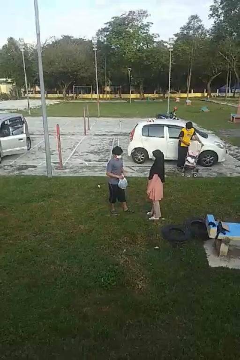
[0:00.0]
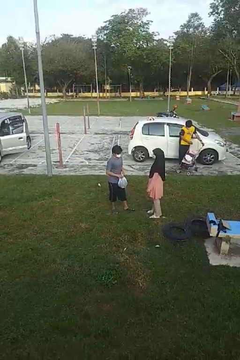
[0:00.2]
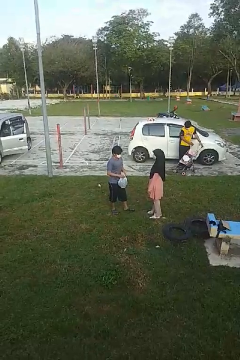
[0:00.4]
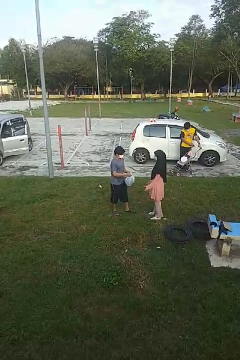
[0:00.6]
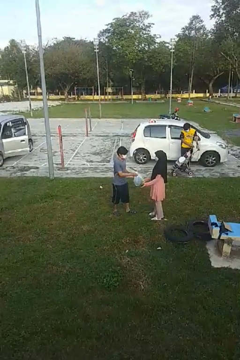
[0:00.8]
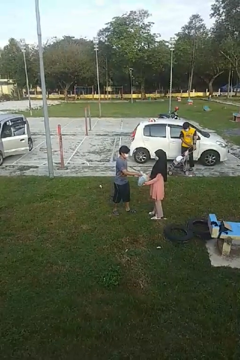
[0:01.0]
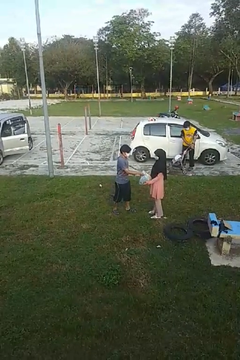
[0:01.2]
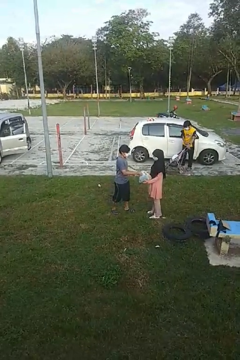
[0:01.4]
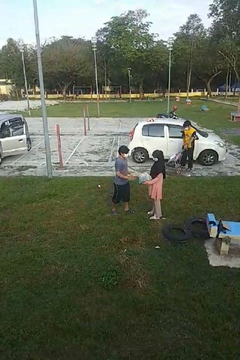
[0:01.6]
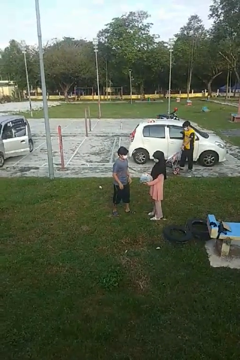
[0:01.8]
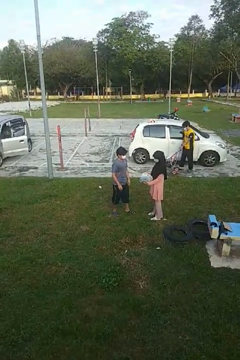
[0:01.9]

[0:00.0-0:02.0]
person transfers object to person

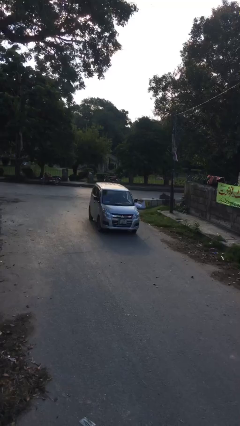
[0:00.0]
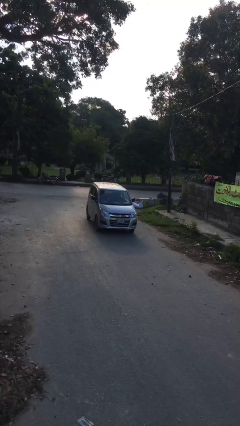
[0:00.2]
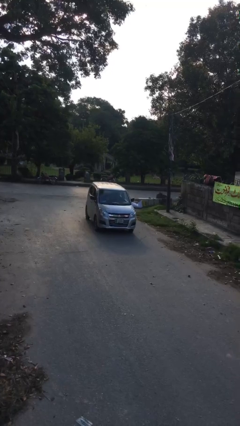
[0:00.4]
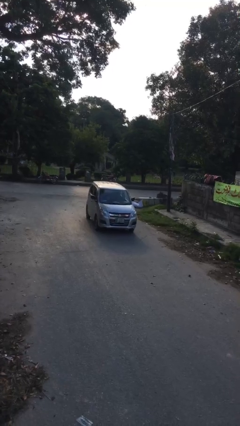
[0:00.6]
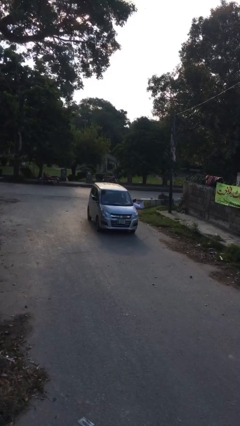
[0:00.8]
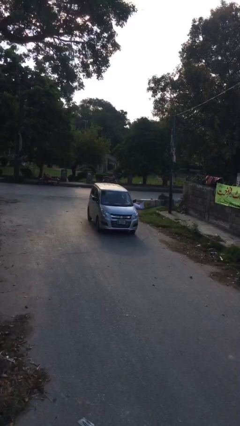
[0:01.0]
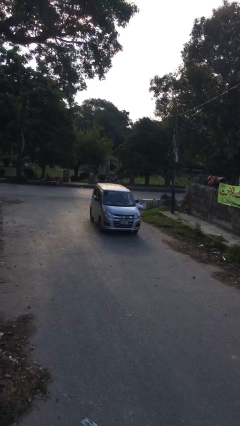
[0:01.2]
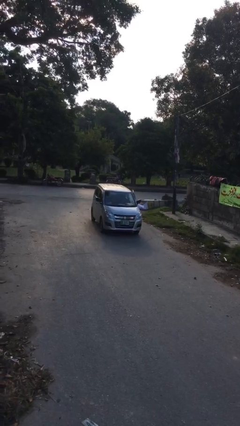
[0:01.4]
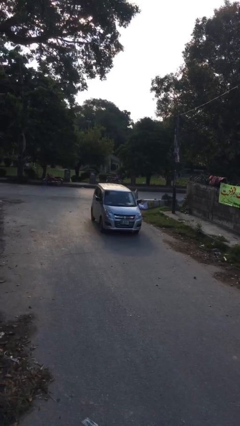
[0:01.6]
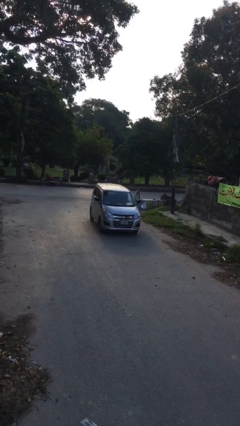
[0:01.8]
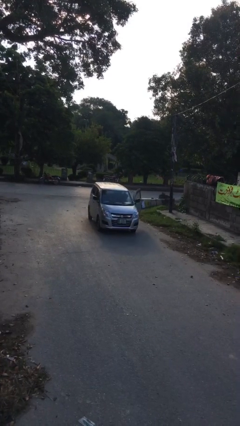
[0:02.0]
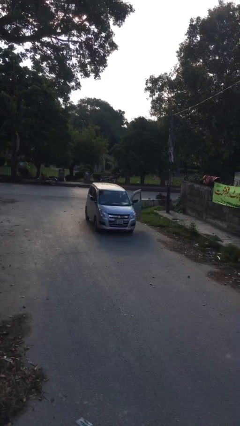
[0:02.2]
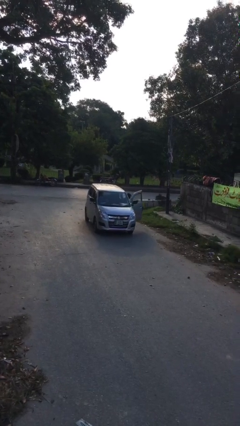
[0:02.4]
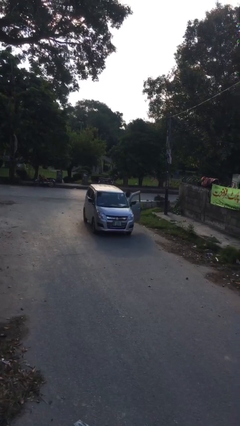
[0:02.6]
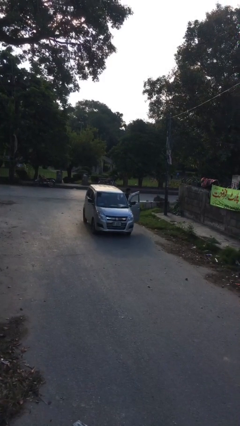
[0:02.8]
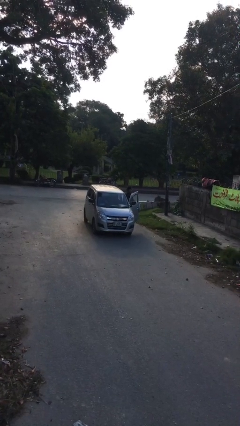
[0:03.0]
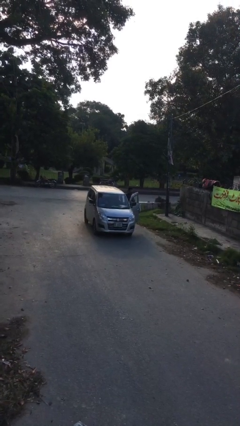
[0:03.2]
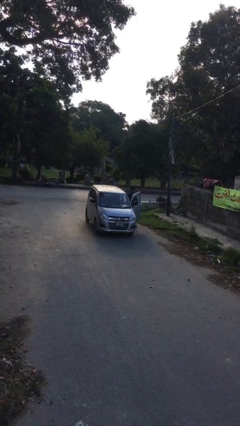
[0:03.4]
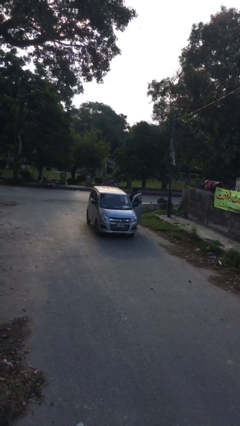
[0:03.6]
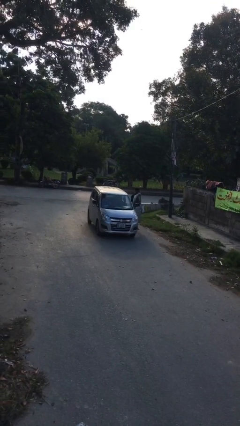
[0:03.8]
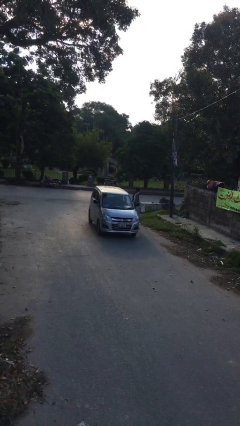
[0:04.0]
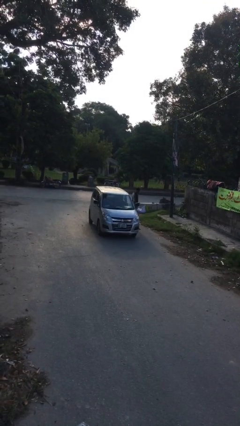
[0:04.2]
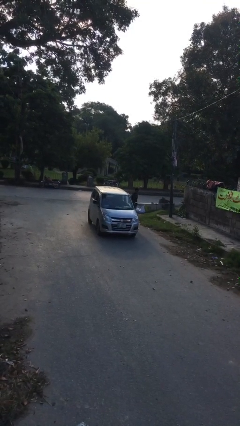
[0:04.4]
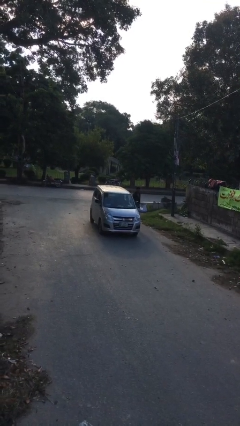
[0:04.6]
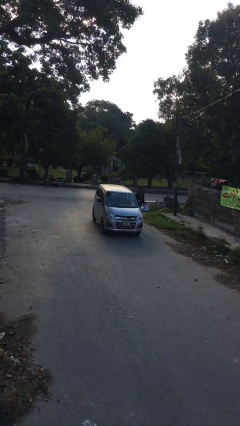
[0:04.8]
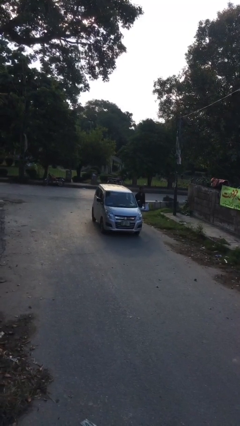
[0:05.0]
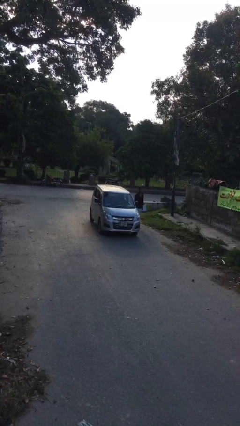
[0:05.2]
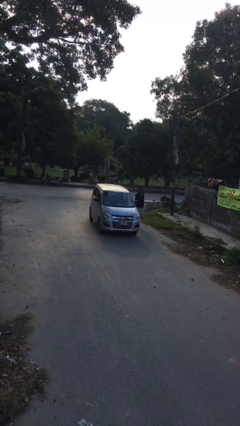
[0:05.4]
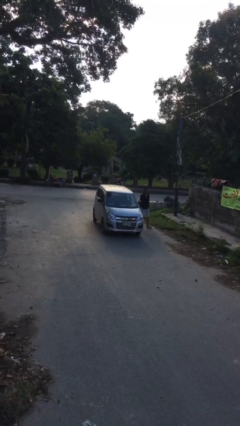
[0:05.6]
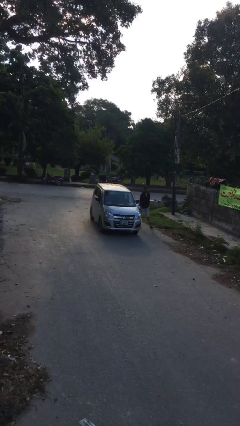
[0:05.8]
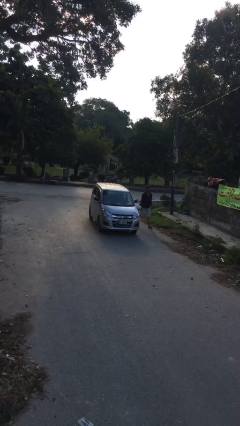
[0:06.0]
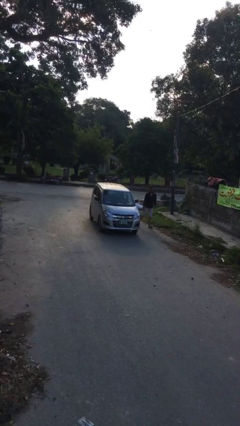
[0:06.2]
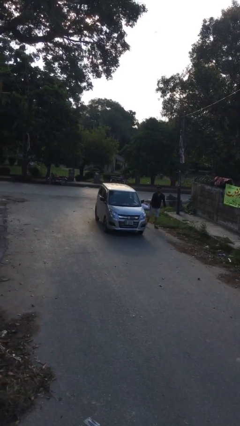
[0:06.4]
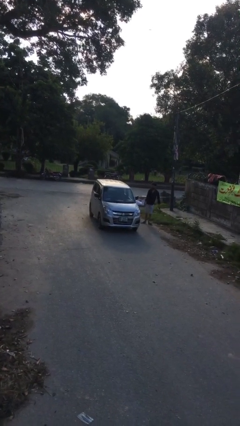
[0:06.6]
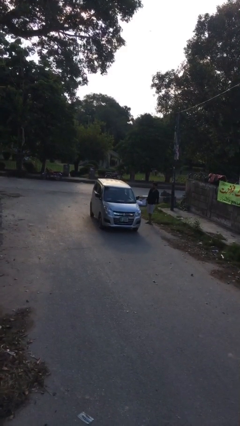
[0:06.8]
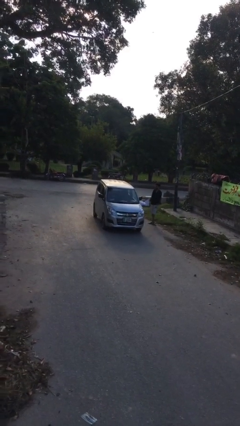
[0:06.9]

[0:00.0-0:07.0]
car drops off person

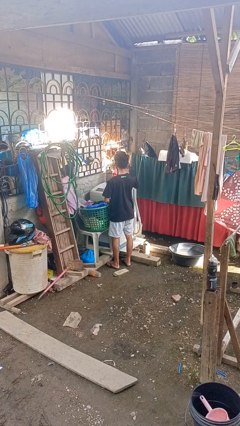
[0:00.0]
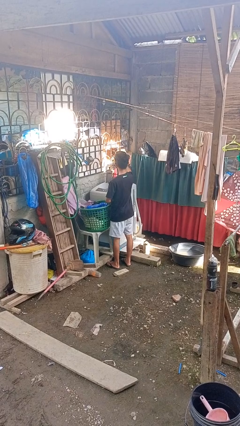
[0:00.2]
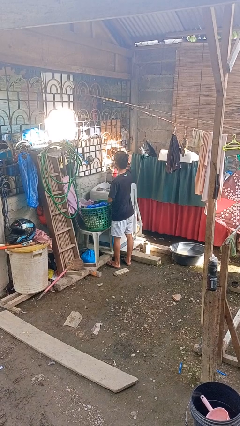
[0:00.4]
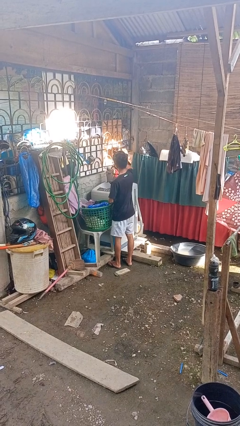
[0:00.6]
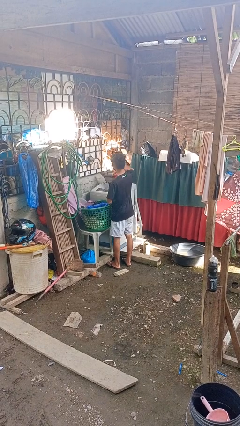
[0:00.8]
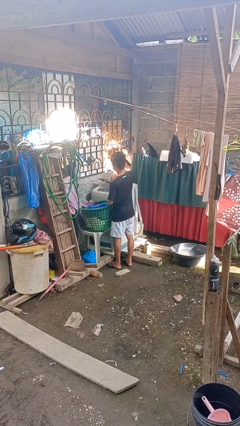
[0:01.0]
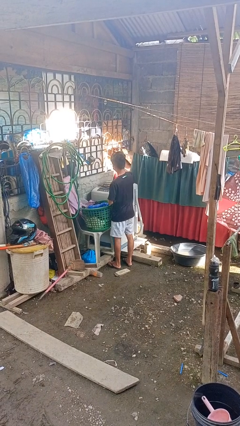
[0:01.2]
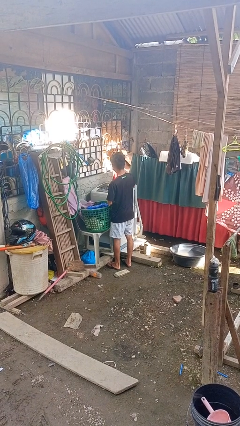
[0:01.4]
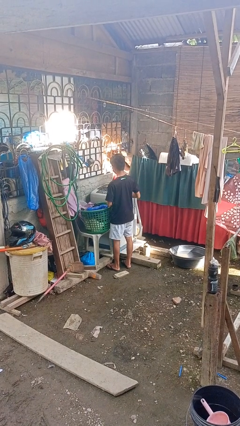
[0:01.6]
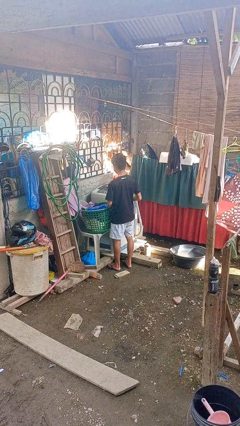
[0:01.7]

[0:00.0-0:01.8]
person closes clothes washer

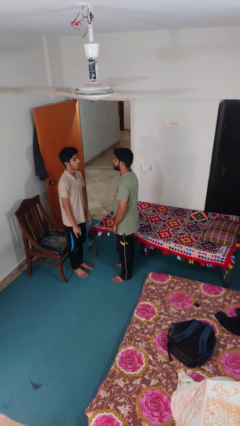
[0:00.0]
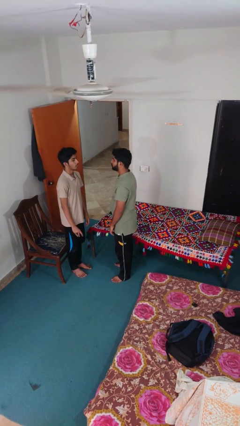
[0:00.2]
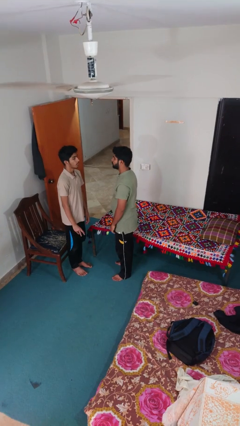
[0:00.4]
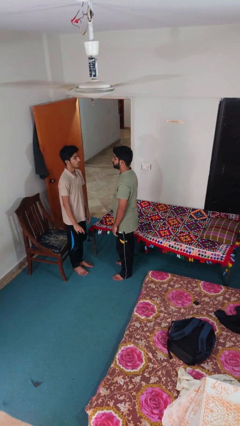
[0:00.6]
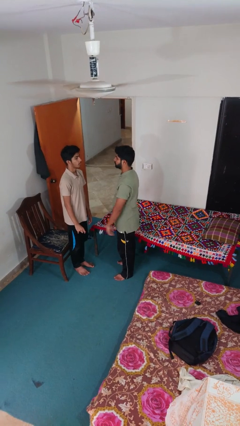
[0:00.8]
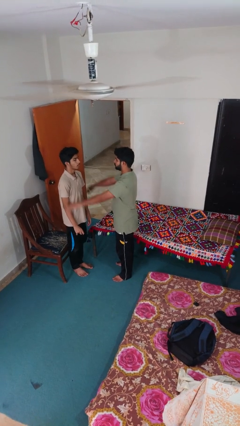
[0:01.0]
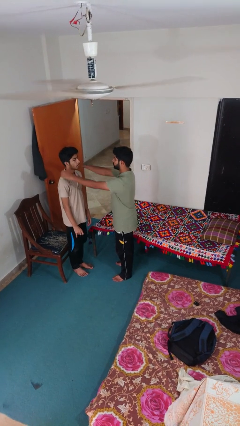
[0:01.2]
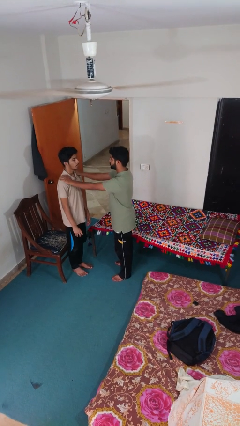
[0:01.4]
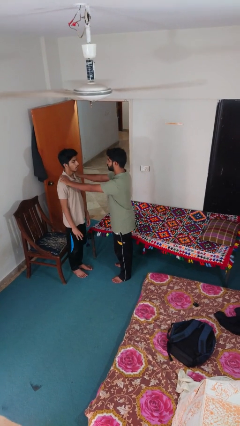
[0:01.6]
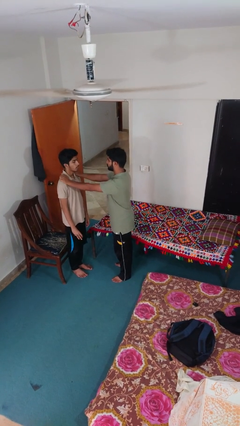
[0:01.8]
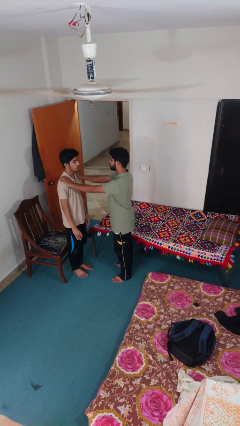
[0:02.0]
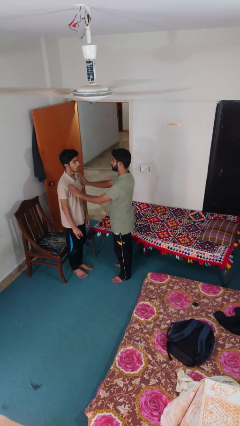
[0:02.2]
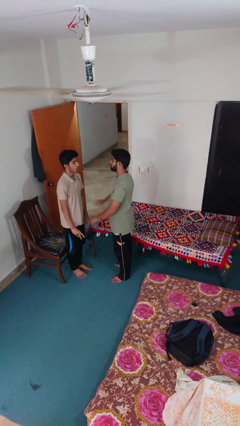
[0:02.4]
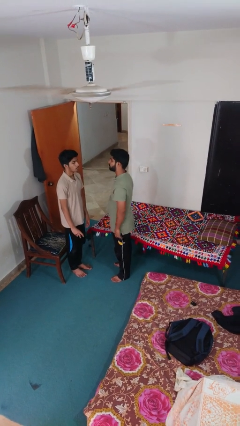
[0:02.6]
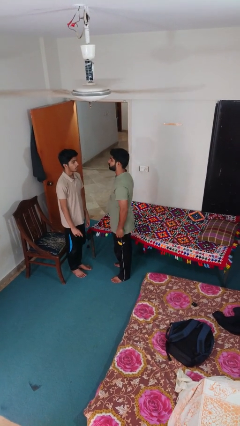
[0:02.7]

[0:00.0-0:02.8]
person pounds shoulders of person

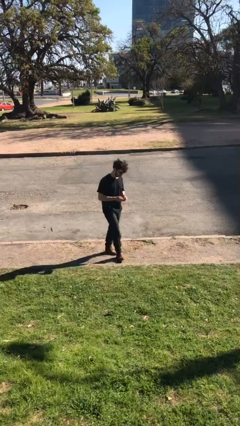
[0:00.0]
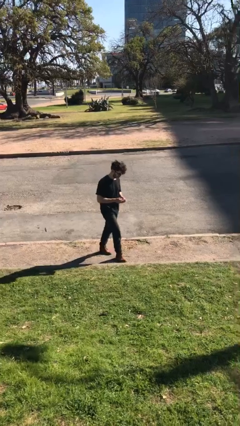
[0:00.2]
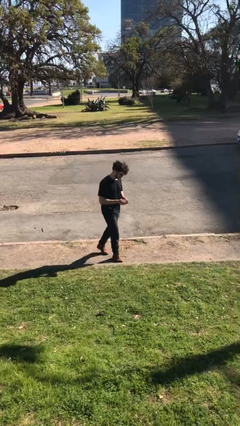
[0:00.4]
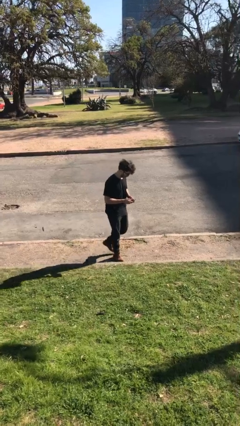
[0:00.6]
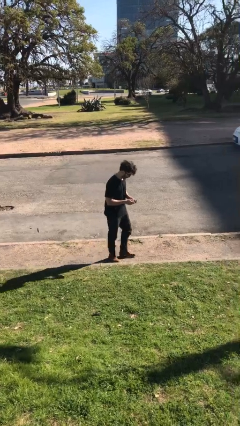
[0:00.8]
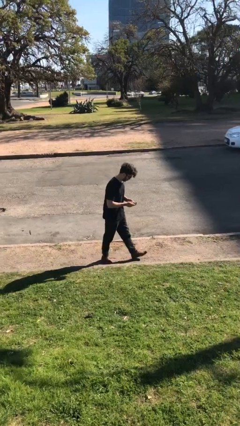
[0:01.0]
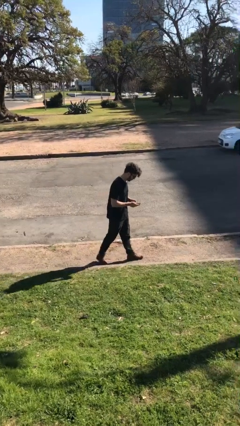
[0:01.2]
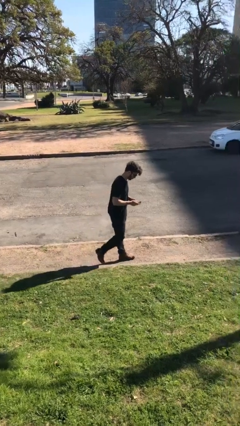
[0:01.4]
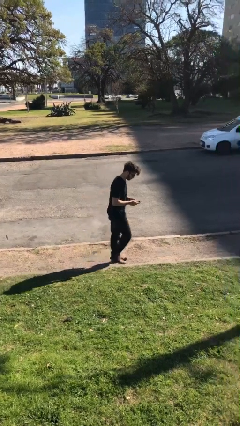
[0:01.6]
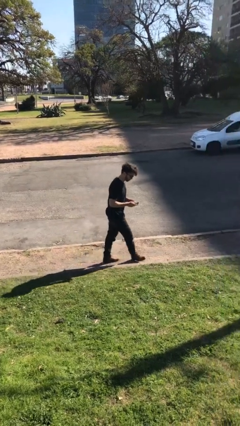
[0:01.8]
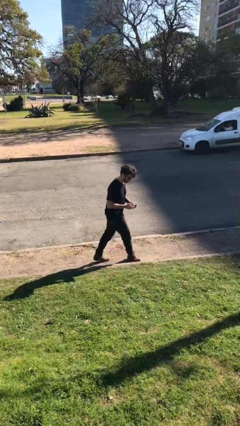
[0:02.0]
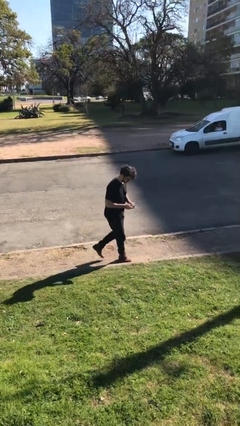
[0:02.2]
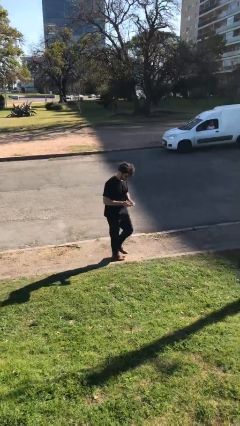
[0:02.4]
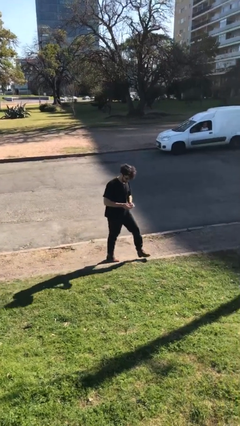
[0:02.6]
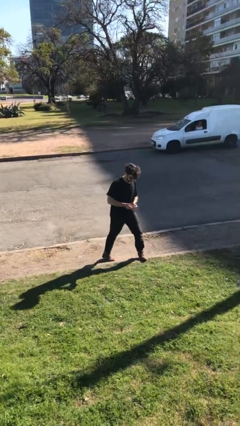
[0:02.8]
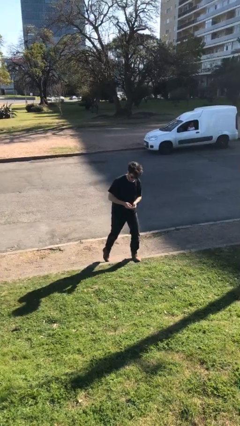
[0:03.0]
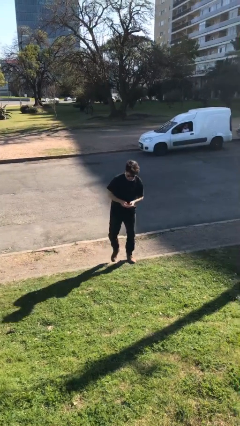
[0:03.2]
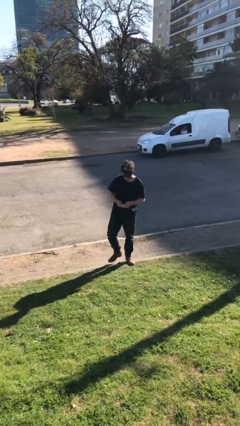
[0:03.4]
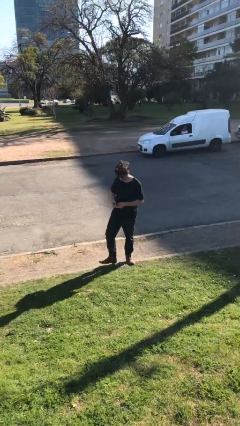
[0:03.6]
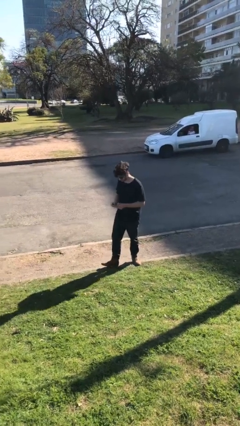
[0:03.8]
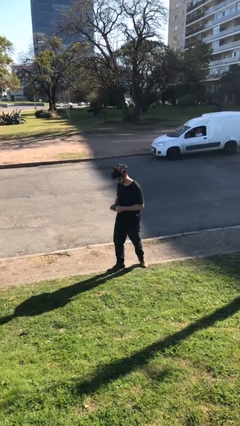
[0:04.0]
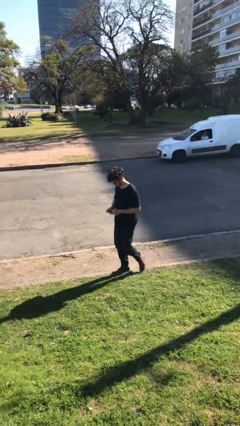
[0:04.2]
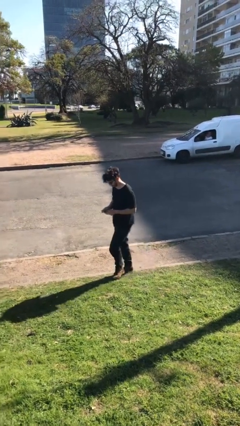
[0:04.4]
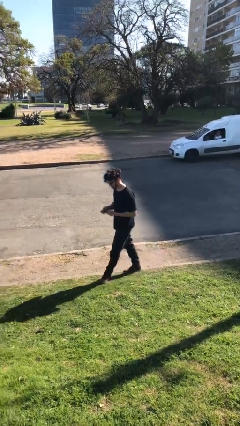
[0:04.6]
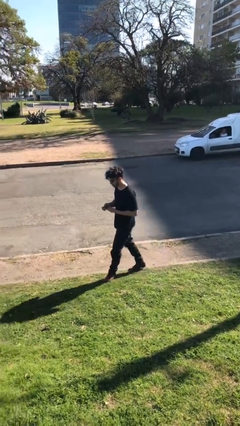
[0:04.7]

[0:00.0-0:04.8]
person texts on phone
